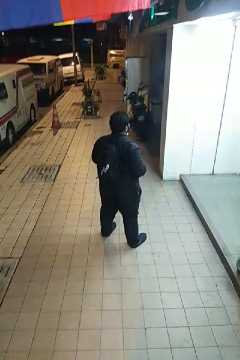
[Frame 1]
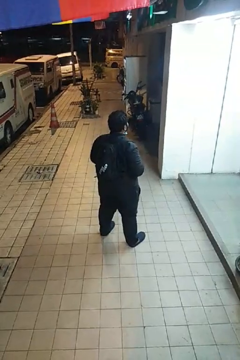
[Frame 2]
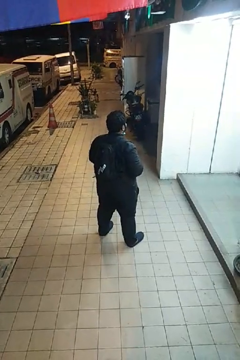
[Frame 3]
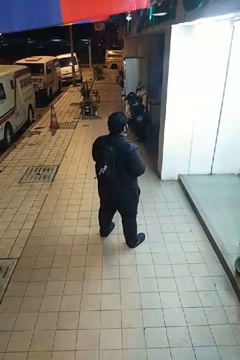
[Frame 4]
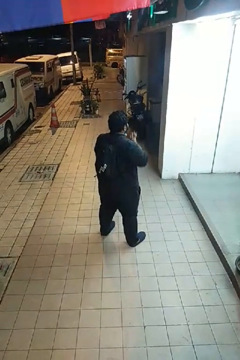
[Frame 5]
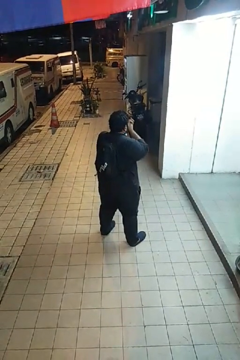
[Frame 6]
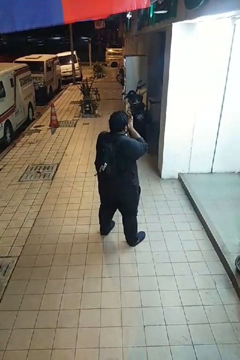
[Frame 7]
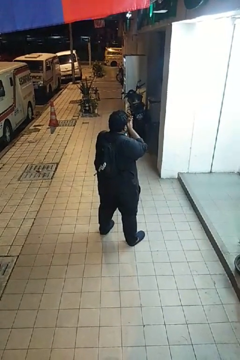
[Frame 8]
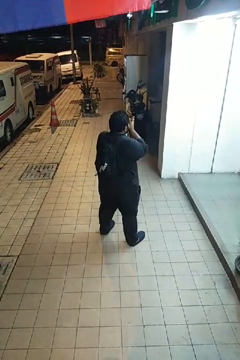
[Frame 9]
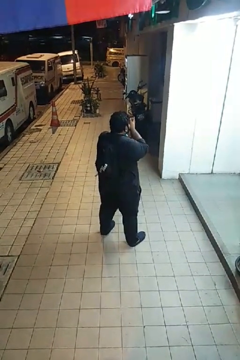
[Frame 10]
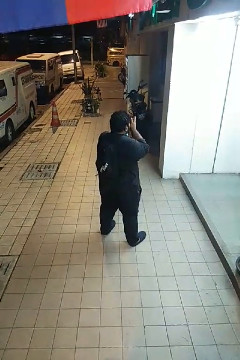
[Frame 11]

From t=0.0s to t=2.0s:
person blows into hands

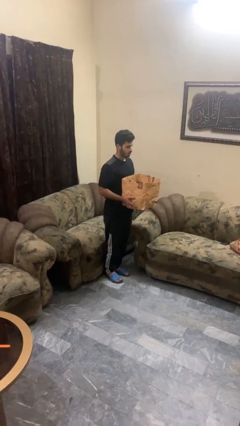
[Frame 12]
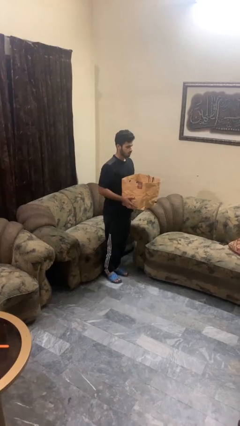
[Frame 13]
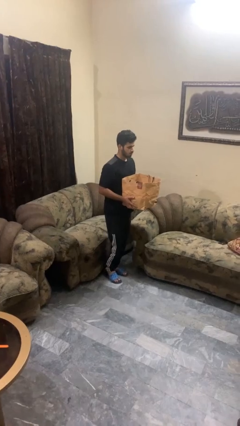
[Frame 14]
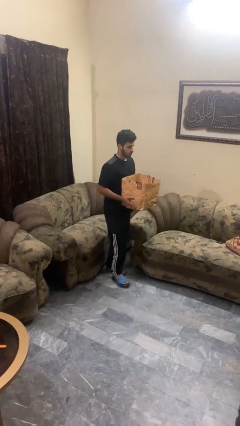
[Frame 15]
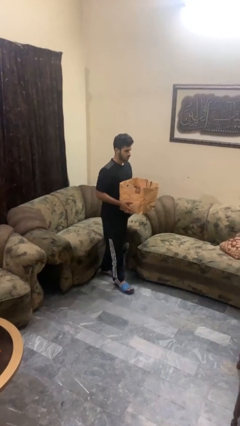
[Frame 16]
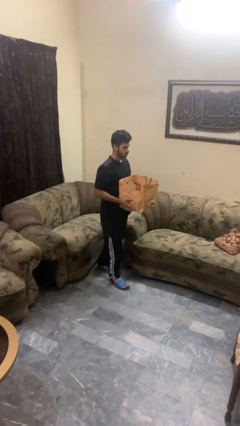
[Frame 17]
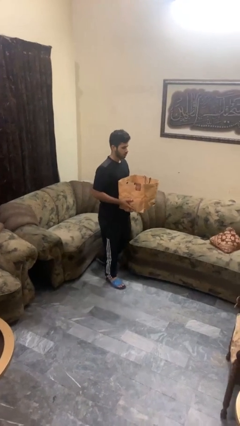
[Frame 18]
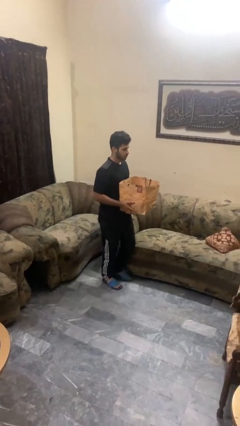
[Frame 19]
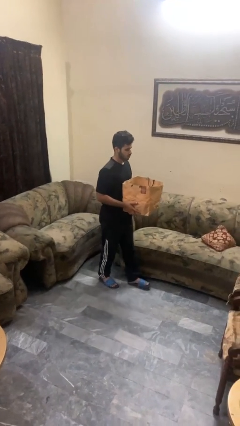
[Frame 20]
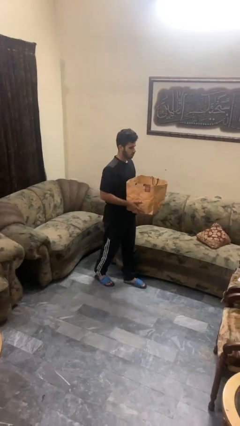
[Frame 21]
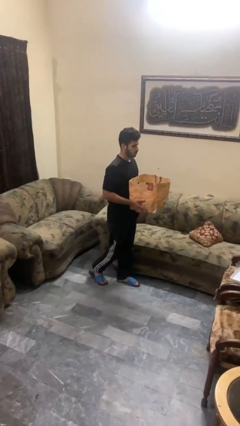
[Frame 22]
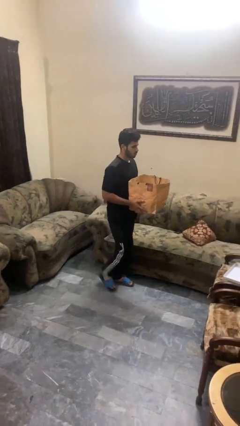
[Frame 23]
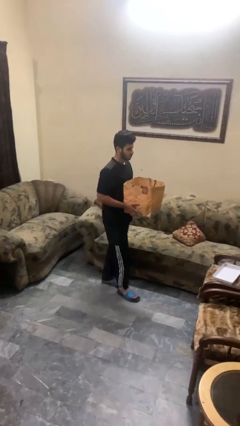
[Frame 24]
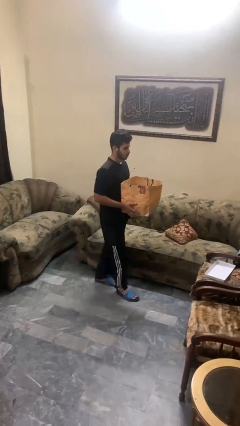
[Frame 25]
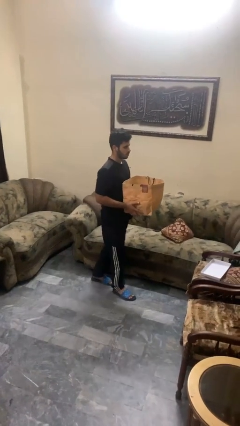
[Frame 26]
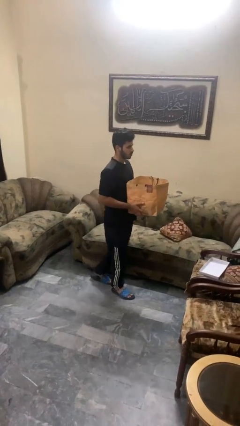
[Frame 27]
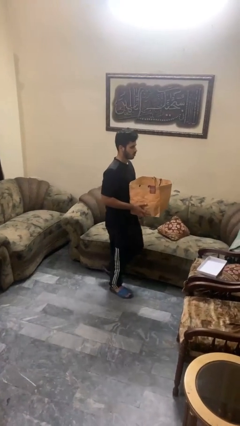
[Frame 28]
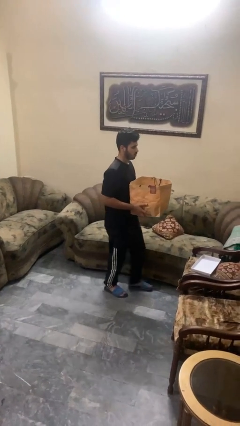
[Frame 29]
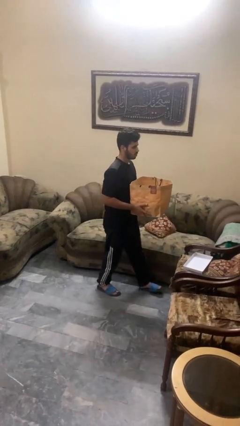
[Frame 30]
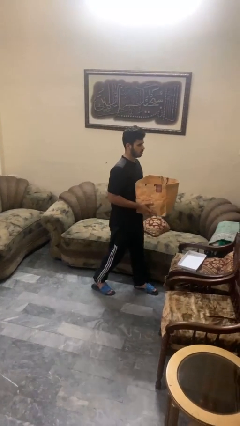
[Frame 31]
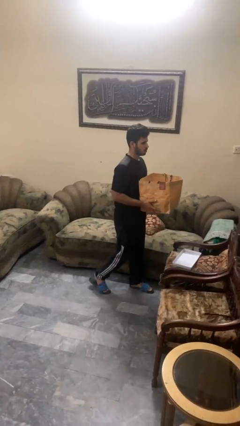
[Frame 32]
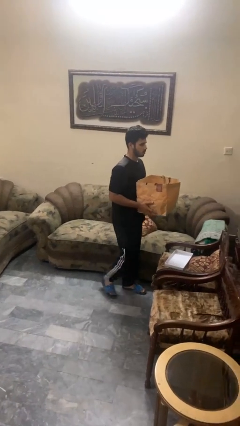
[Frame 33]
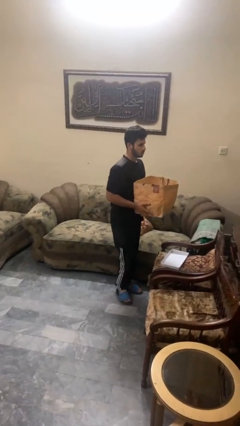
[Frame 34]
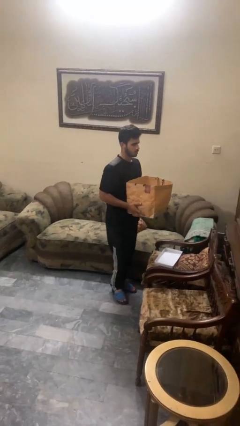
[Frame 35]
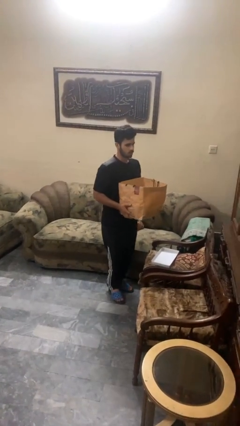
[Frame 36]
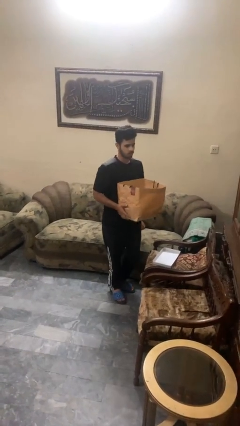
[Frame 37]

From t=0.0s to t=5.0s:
person carries groceries

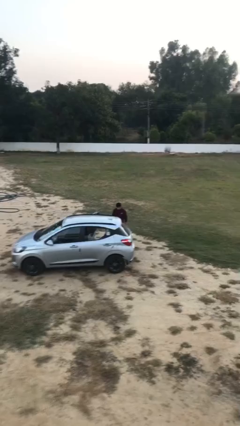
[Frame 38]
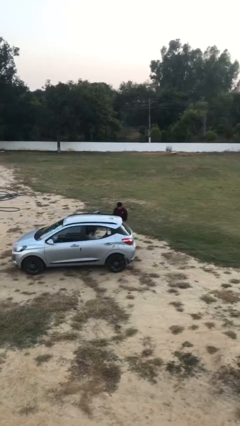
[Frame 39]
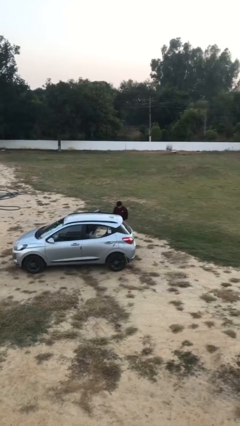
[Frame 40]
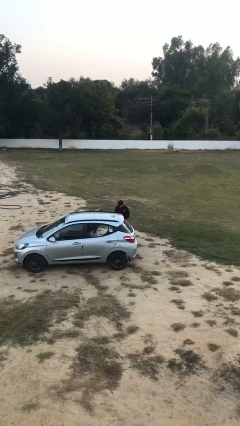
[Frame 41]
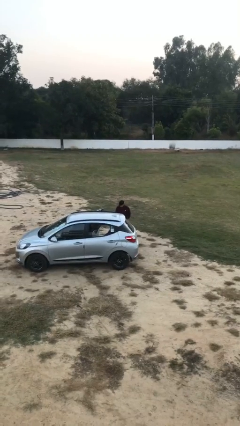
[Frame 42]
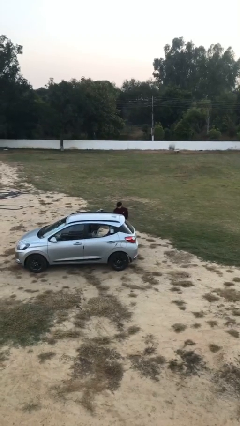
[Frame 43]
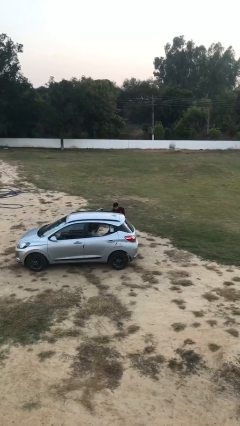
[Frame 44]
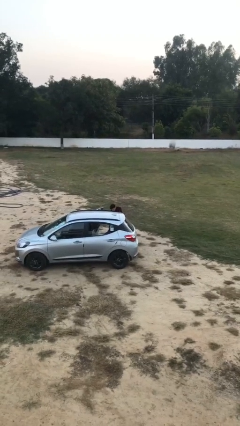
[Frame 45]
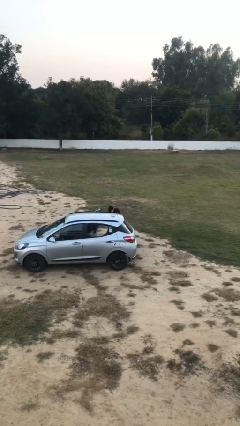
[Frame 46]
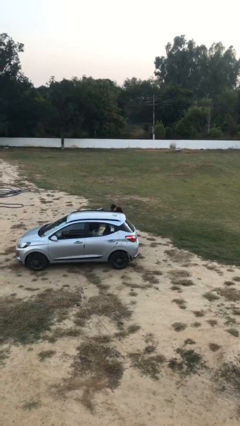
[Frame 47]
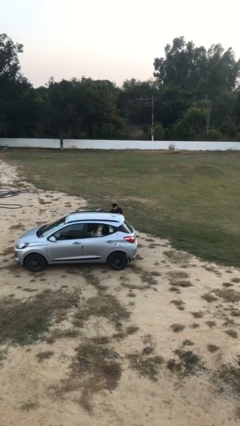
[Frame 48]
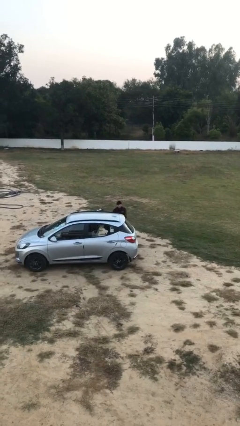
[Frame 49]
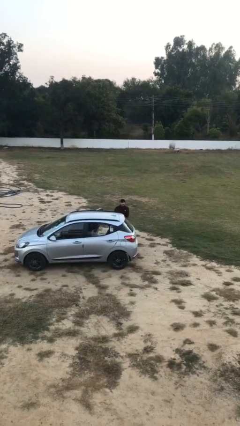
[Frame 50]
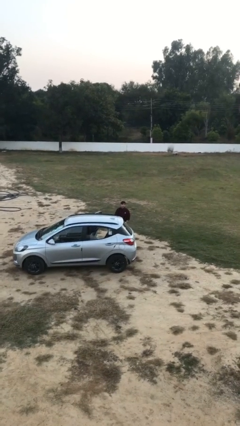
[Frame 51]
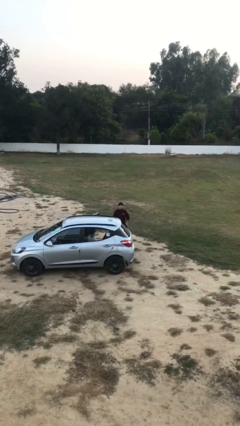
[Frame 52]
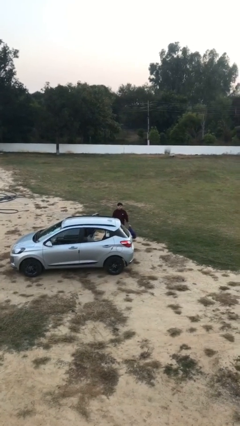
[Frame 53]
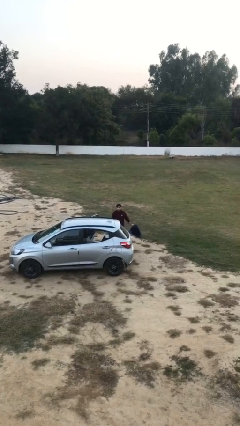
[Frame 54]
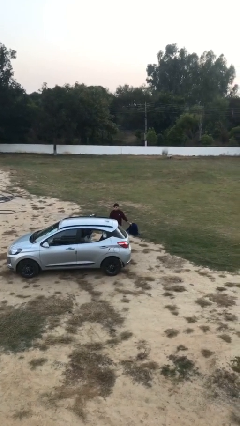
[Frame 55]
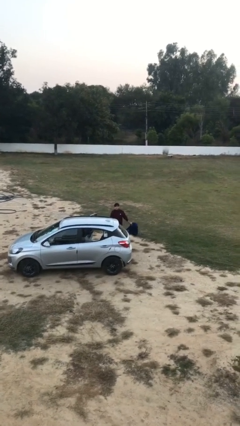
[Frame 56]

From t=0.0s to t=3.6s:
person unloads car

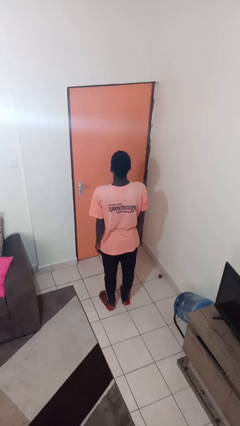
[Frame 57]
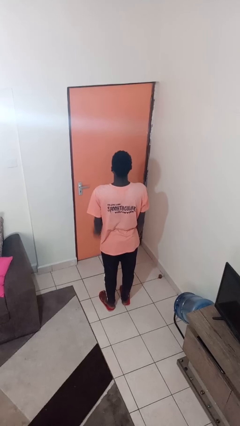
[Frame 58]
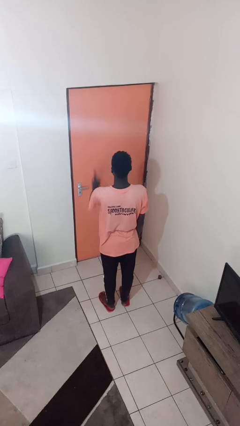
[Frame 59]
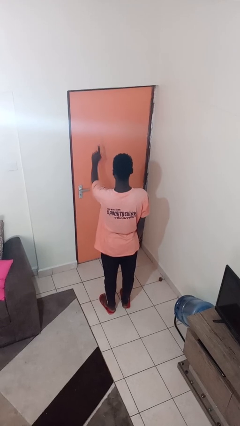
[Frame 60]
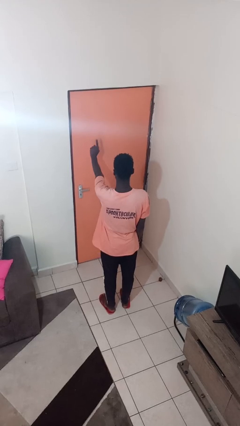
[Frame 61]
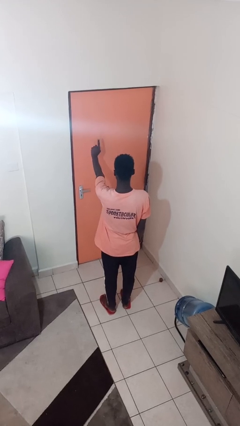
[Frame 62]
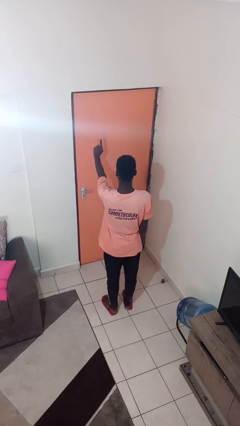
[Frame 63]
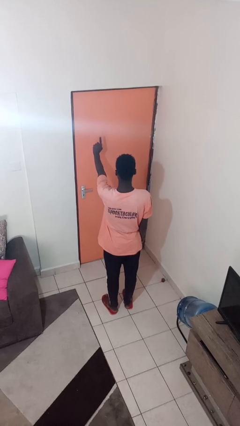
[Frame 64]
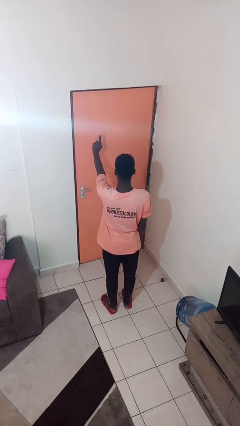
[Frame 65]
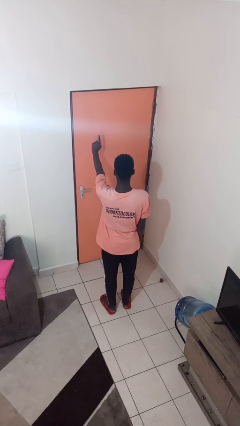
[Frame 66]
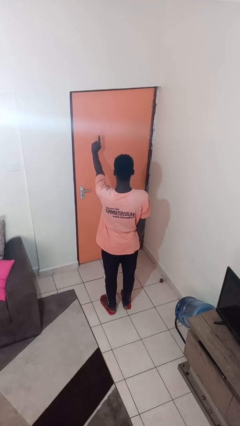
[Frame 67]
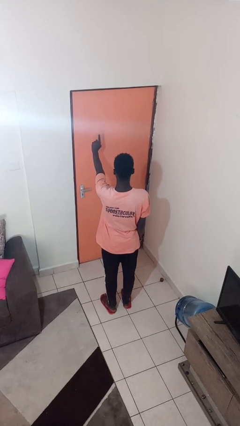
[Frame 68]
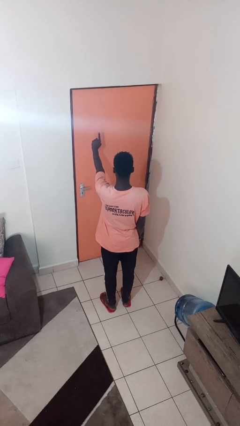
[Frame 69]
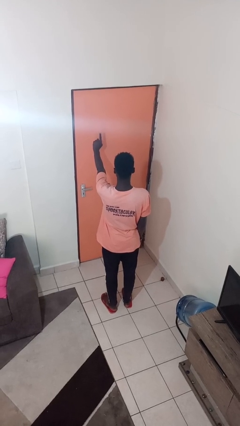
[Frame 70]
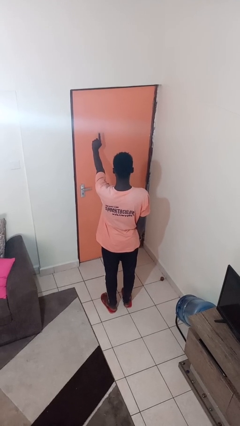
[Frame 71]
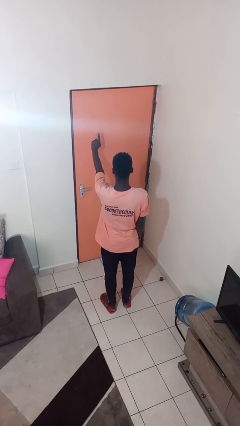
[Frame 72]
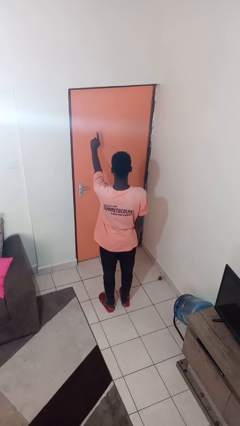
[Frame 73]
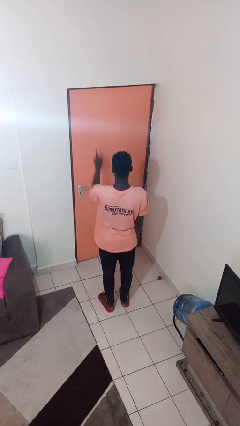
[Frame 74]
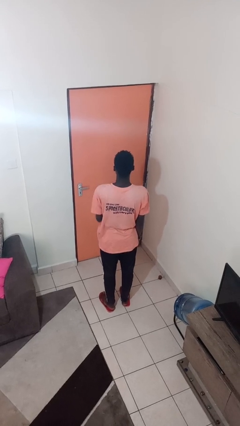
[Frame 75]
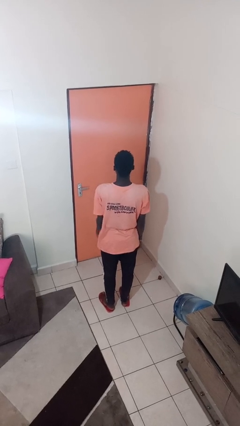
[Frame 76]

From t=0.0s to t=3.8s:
person gestures number one

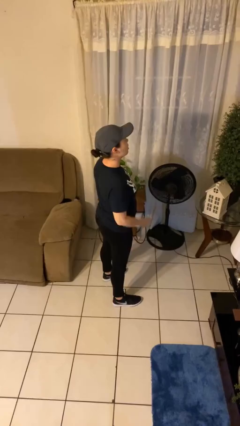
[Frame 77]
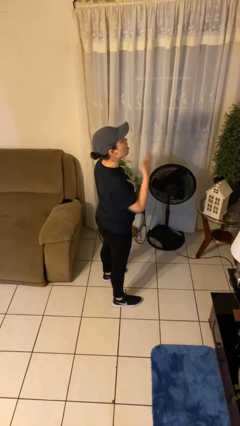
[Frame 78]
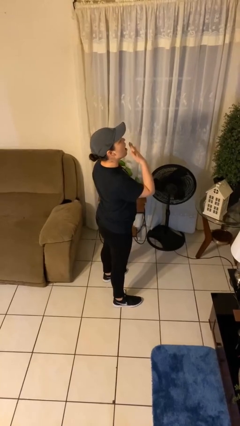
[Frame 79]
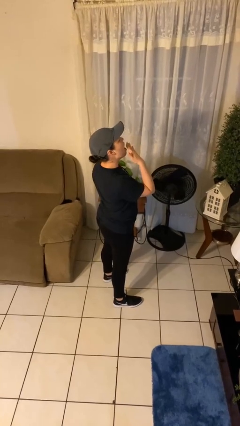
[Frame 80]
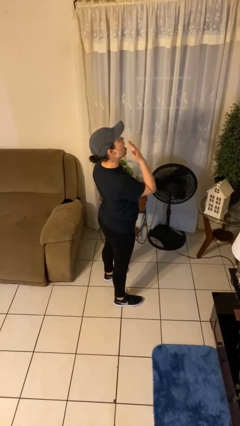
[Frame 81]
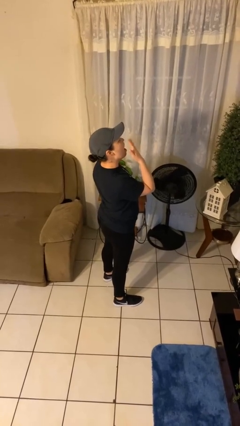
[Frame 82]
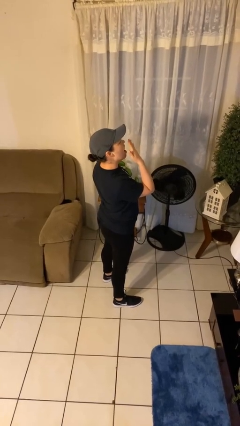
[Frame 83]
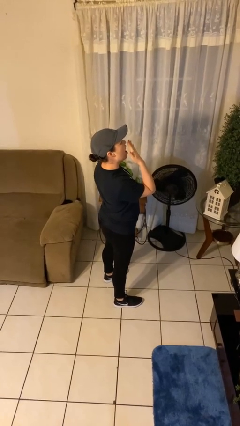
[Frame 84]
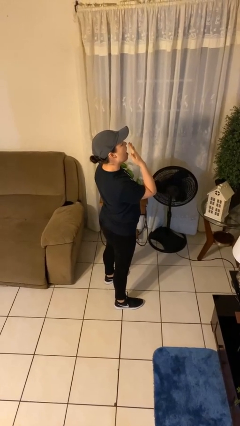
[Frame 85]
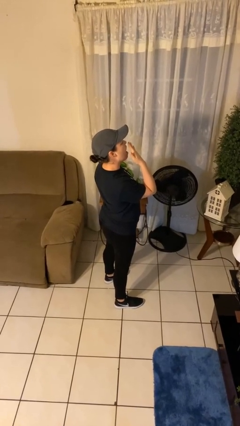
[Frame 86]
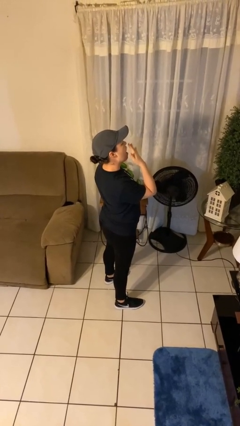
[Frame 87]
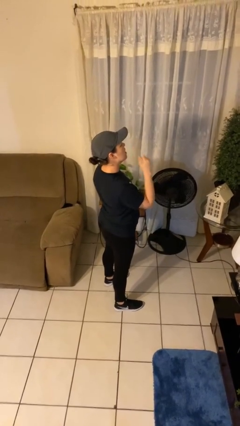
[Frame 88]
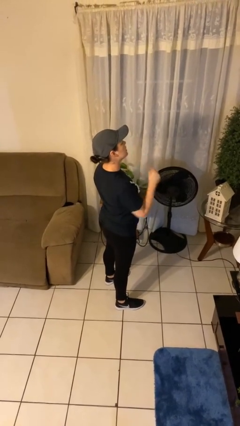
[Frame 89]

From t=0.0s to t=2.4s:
person yawns

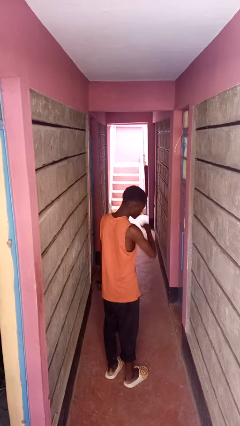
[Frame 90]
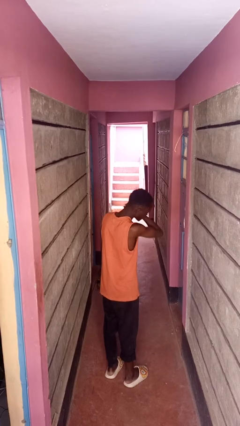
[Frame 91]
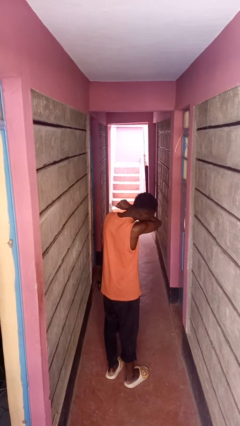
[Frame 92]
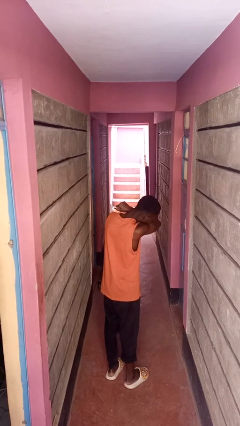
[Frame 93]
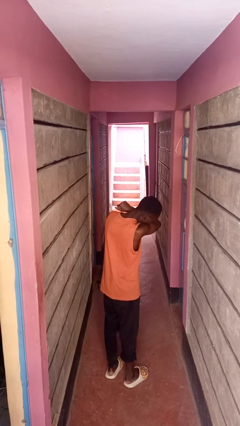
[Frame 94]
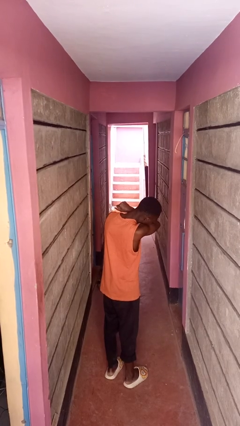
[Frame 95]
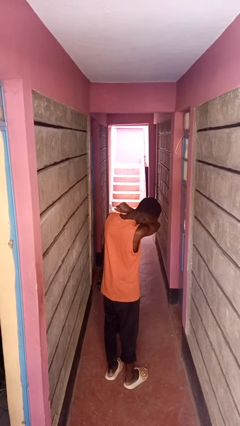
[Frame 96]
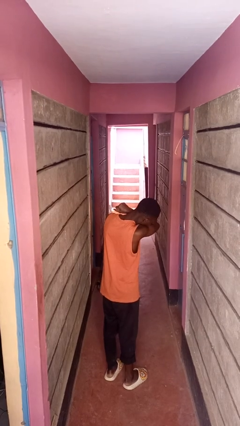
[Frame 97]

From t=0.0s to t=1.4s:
person sneezes into arm
